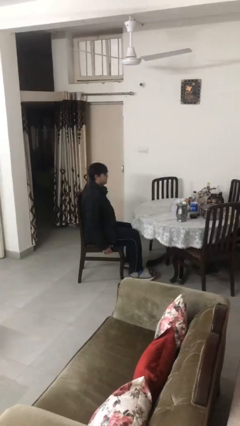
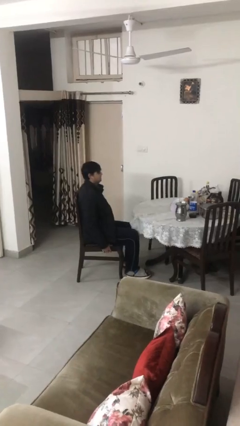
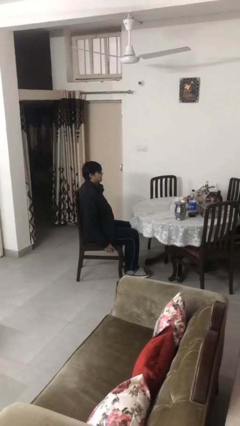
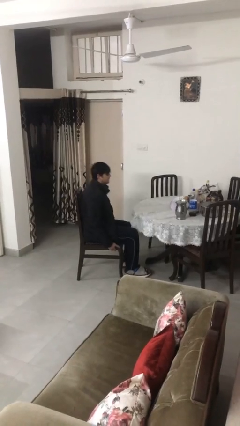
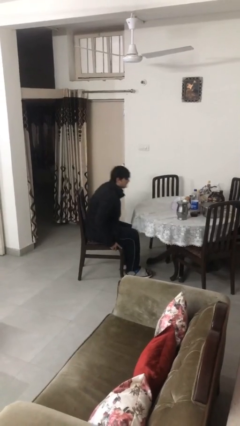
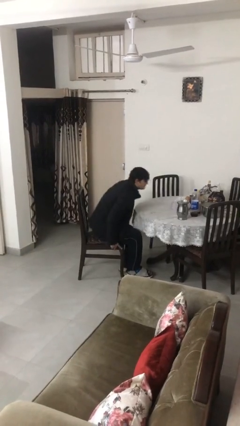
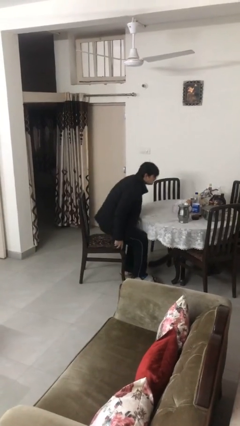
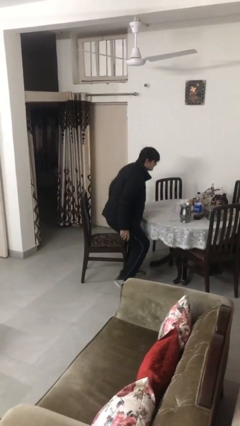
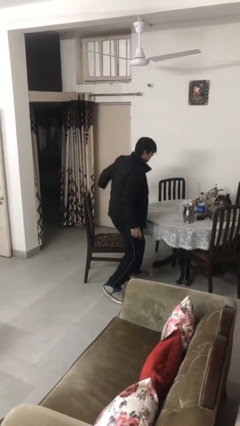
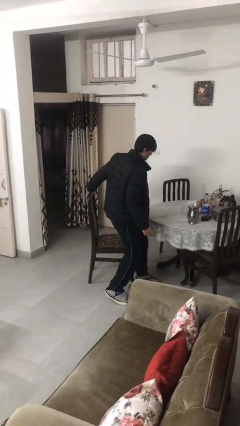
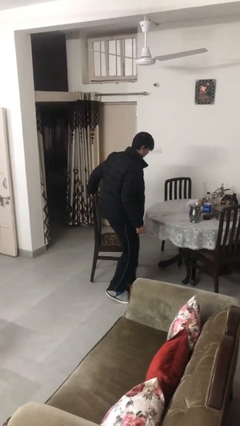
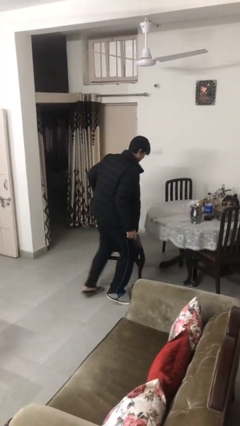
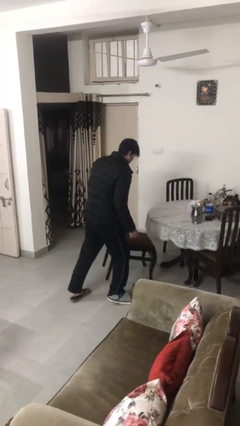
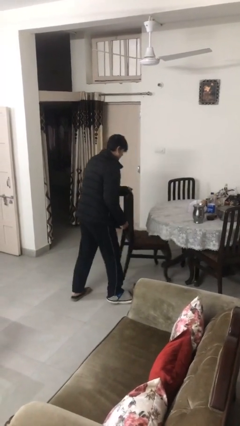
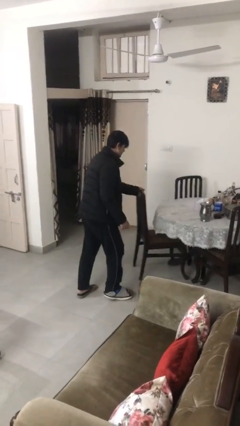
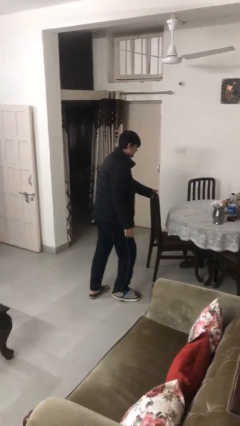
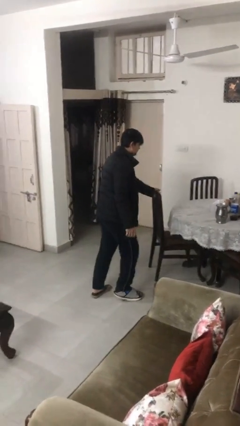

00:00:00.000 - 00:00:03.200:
person stands up

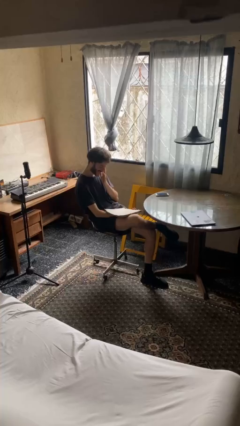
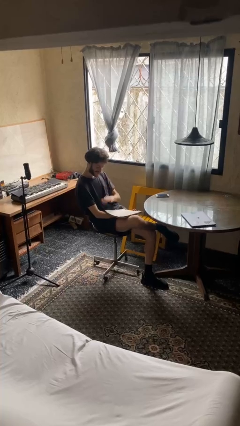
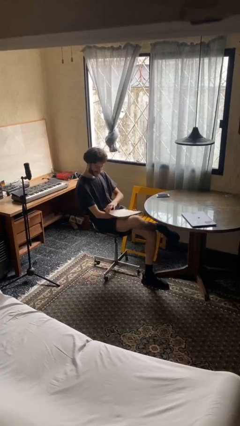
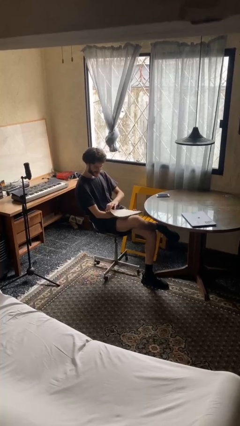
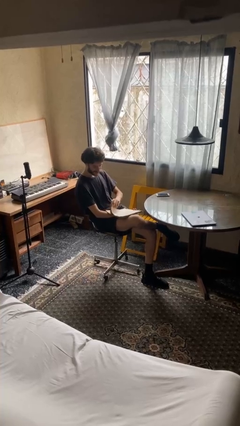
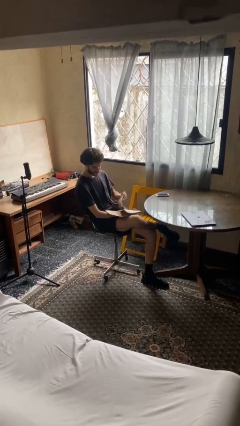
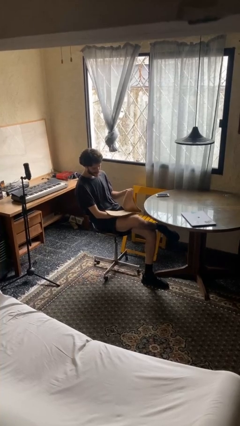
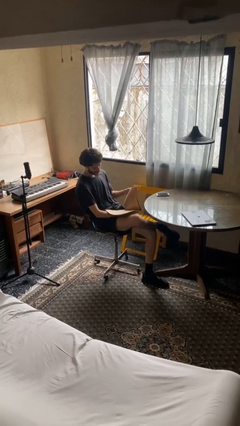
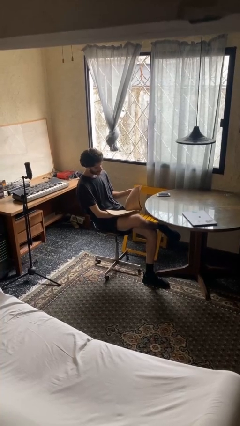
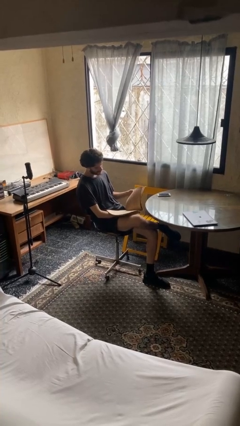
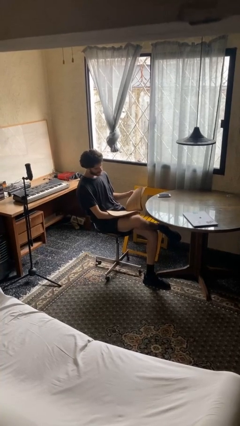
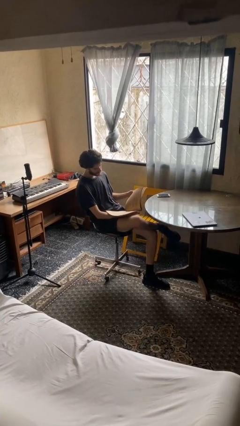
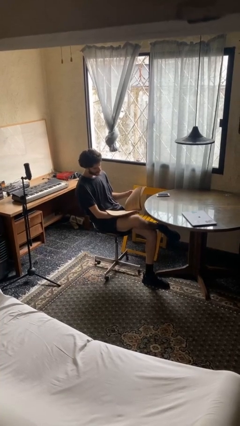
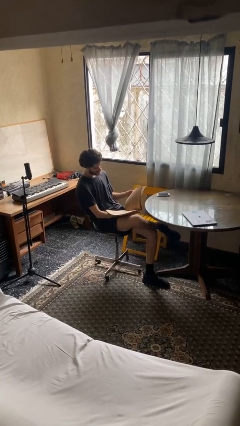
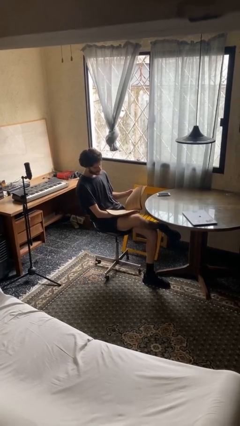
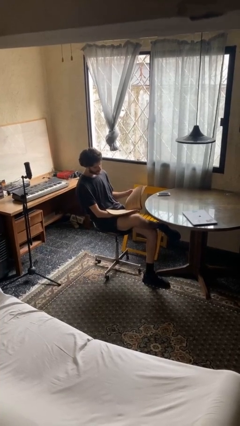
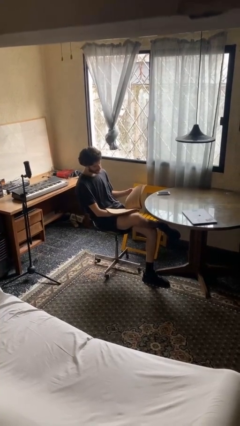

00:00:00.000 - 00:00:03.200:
person reads document

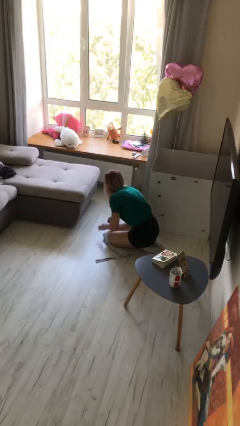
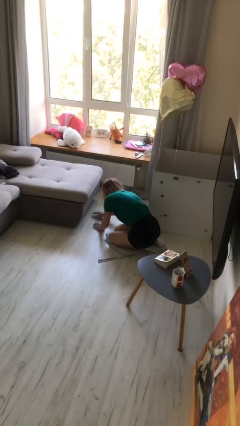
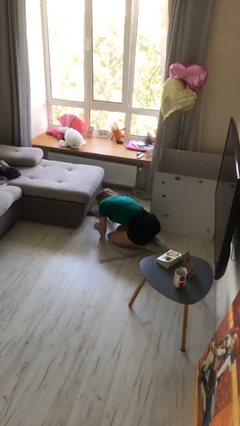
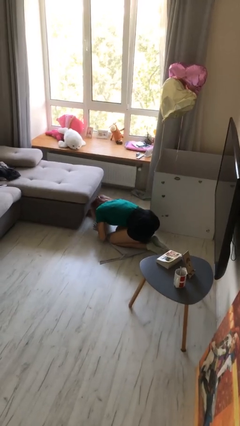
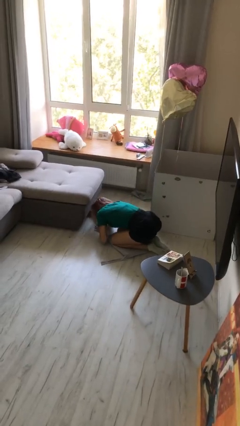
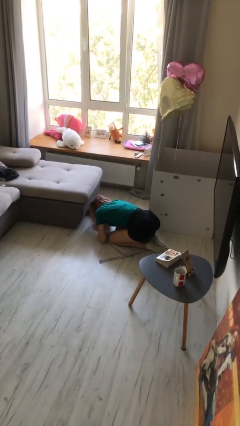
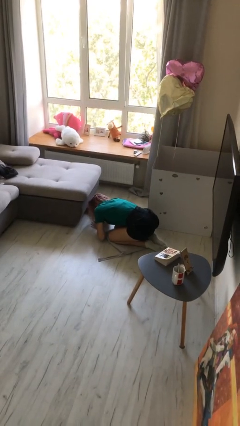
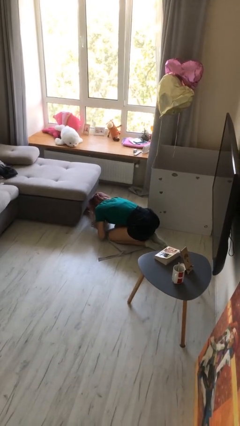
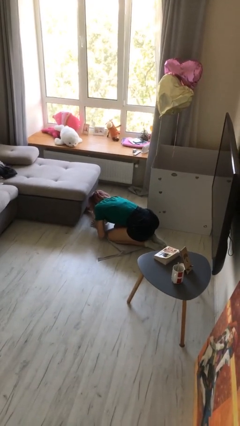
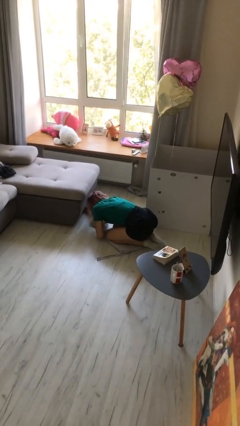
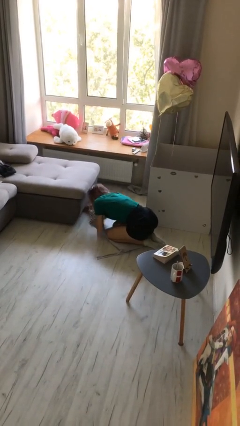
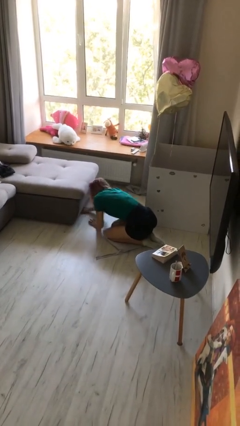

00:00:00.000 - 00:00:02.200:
person searches under bed

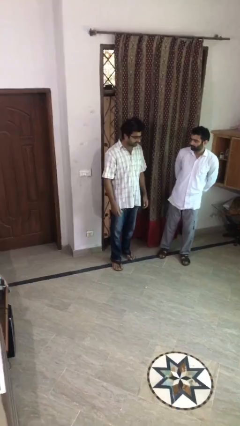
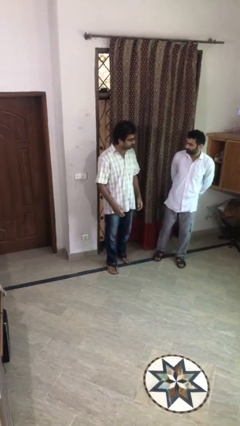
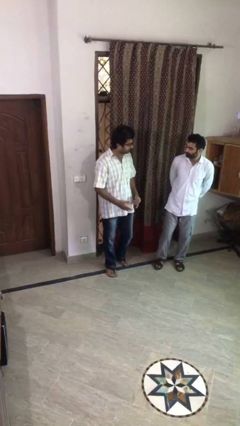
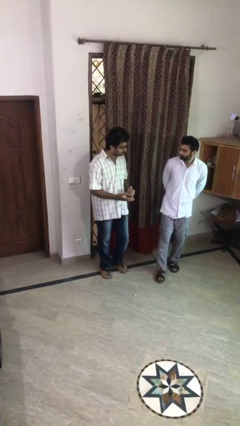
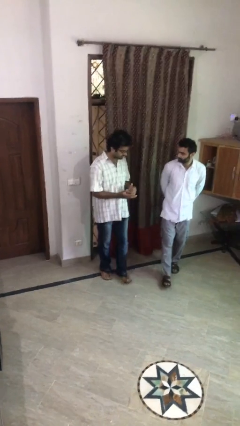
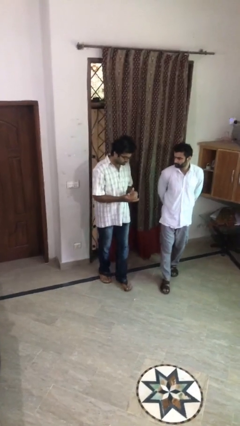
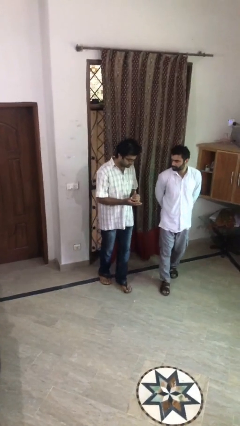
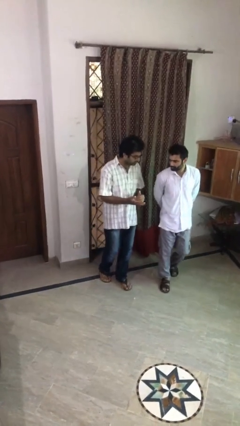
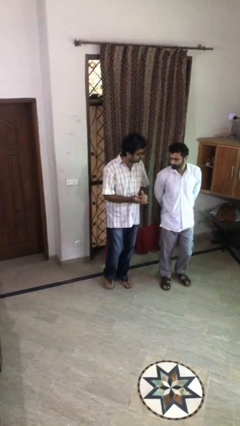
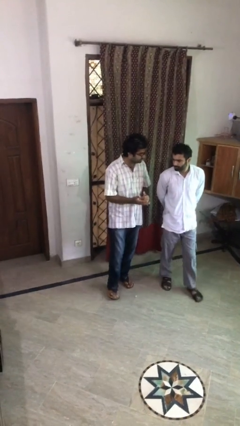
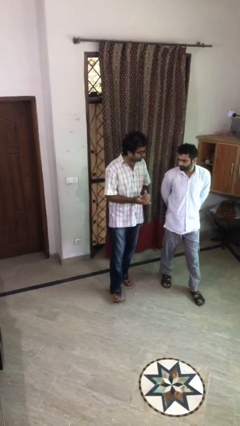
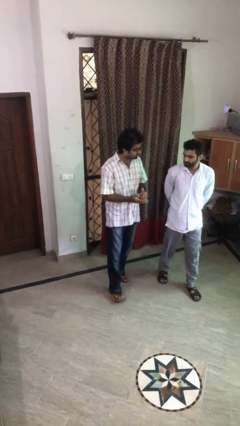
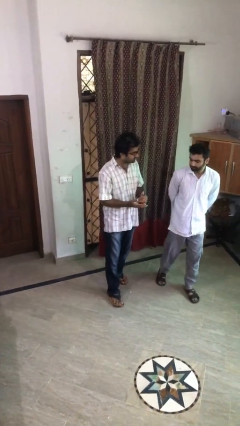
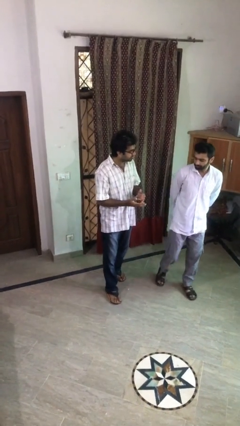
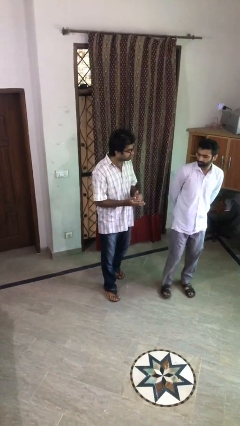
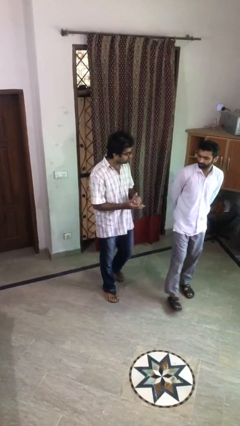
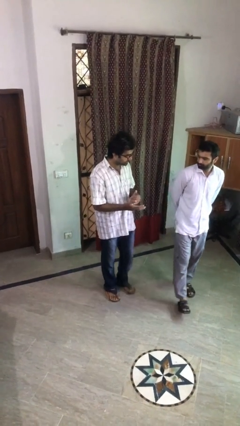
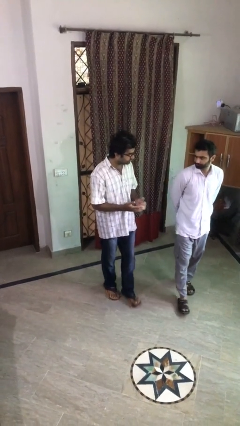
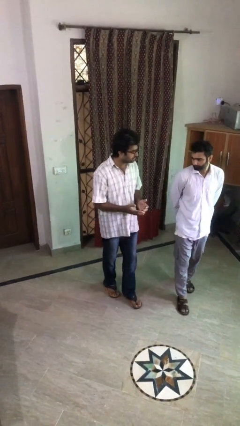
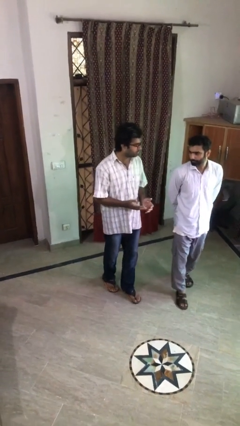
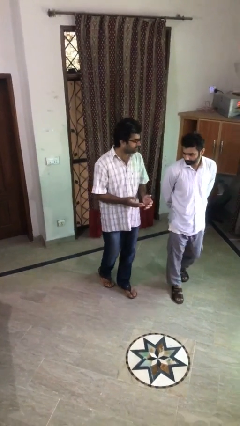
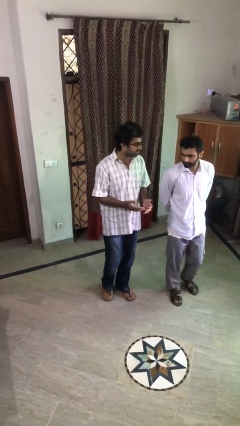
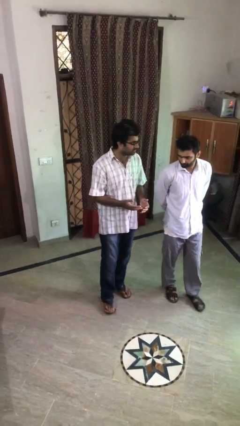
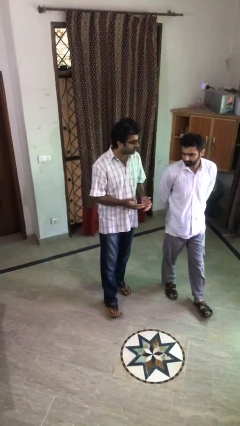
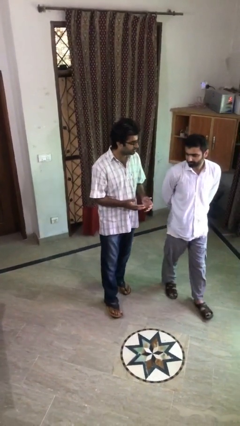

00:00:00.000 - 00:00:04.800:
person talks to person

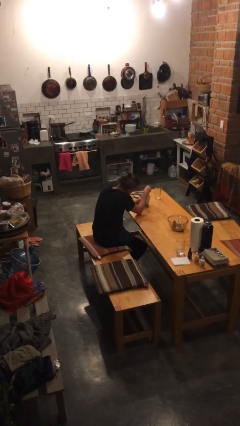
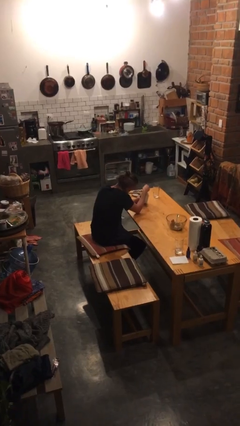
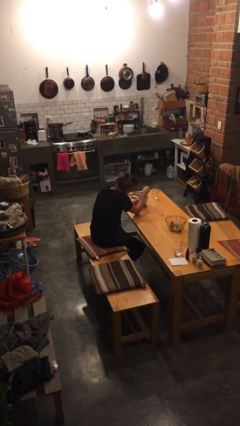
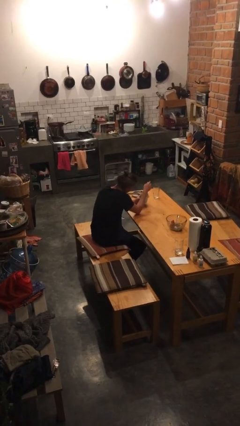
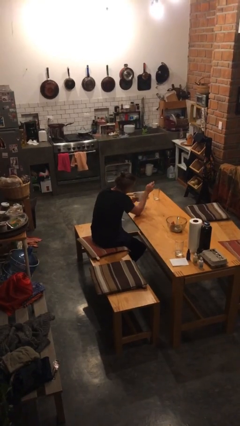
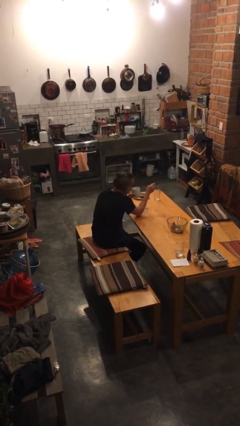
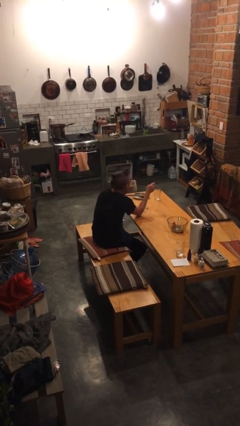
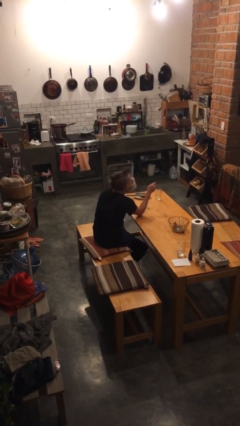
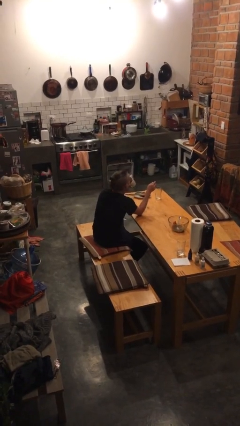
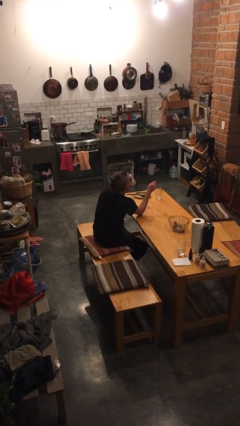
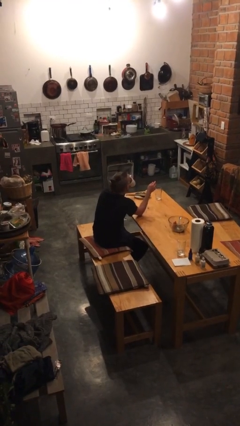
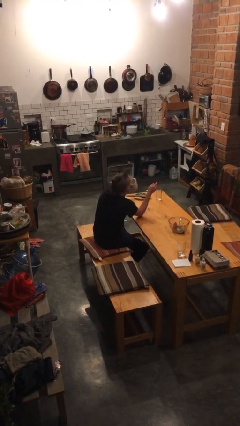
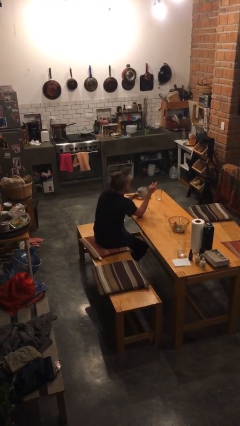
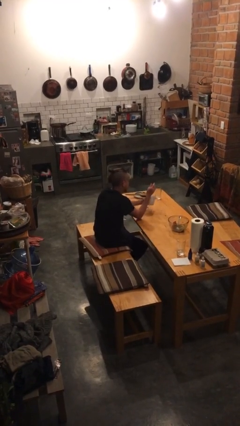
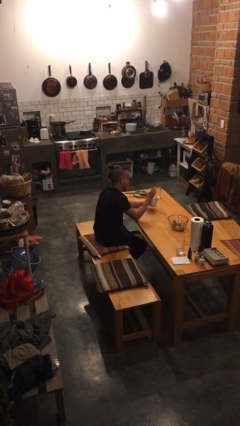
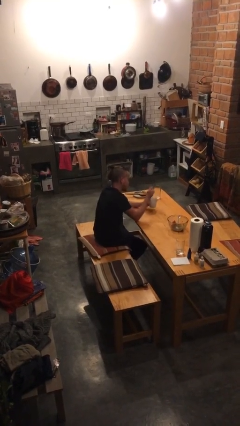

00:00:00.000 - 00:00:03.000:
person drinks from mug

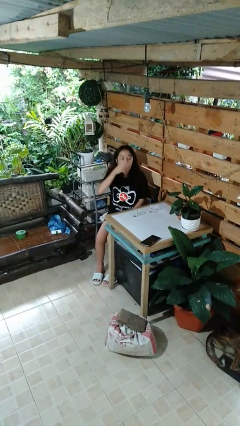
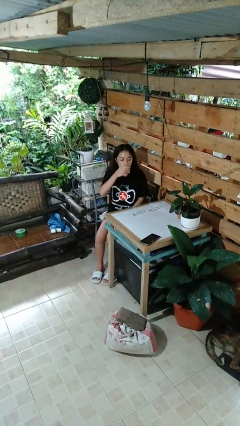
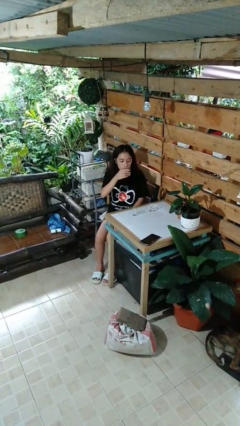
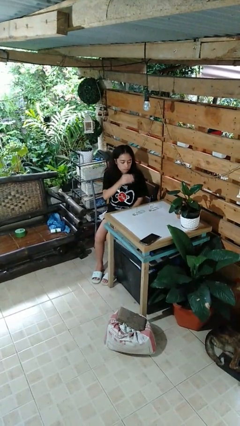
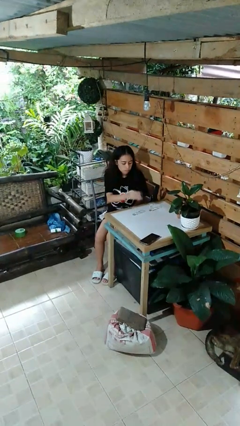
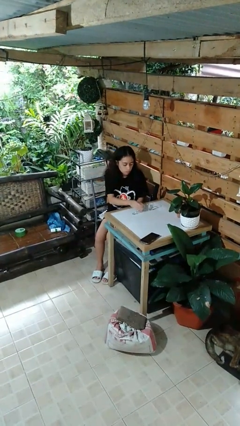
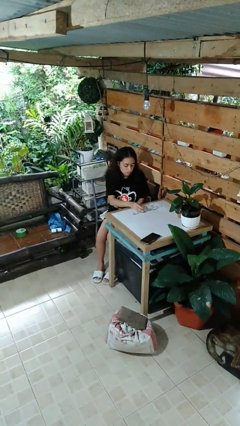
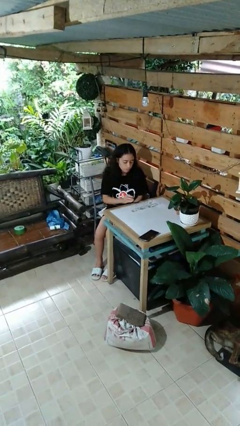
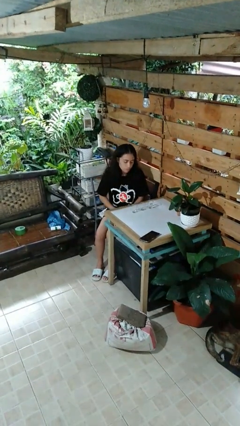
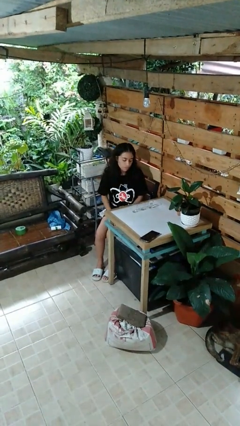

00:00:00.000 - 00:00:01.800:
person puts down object on table
